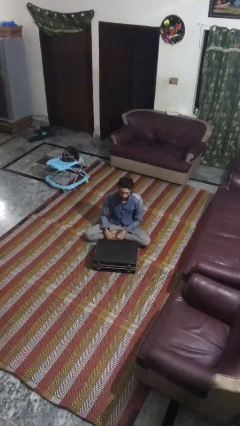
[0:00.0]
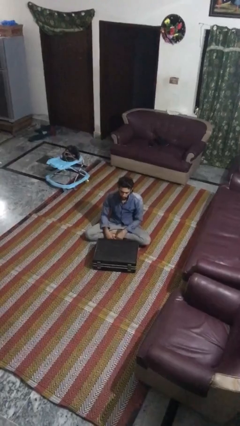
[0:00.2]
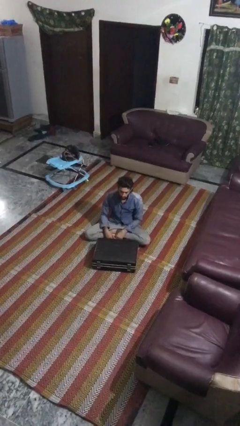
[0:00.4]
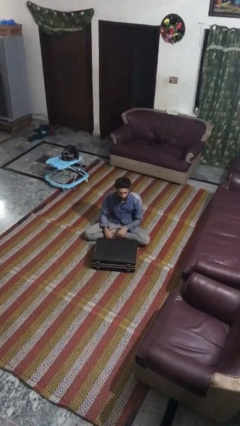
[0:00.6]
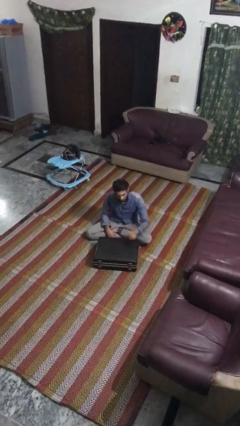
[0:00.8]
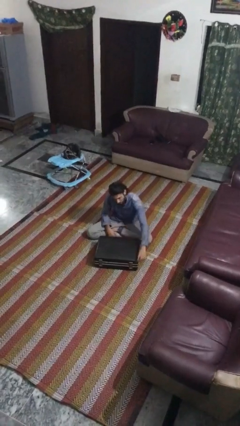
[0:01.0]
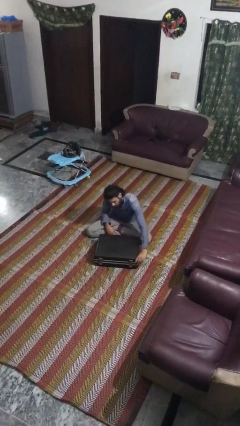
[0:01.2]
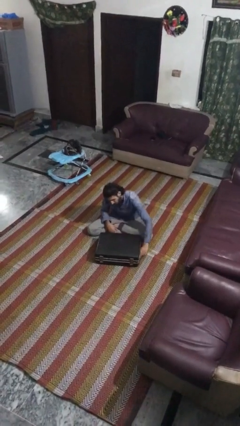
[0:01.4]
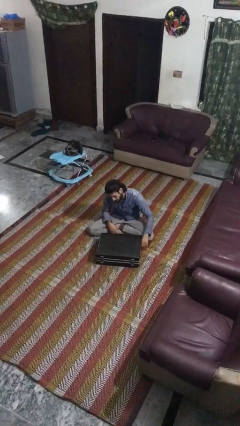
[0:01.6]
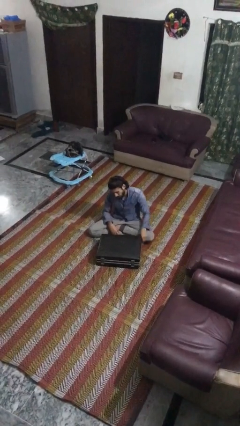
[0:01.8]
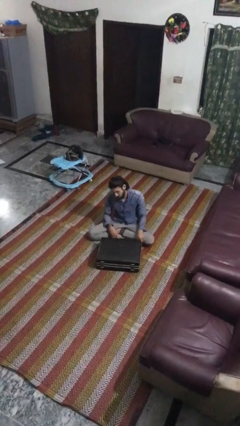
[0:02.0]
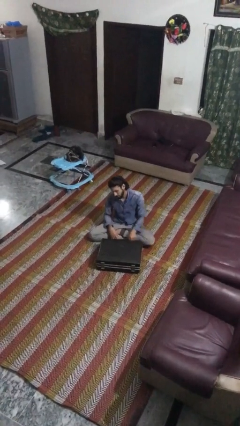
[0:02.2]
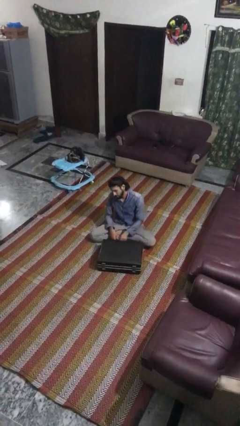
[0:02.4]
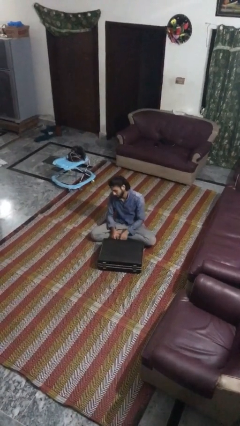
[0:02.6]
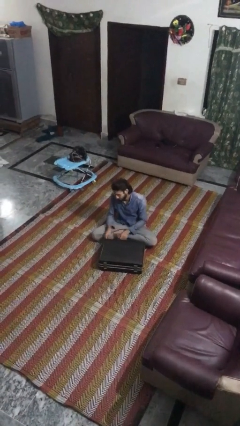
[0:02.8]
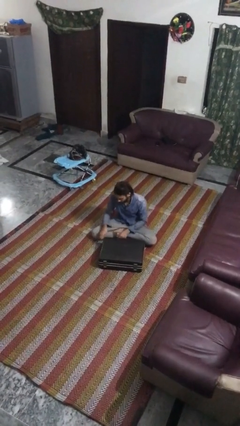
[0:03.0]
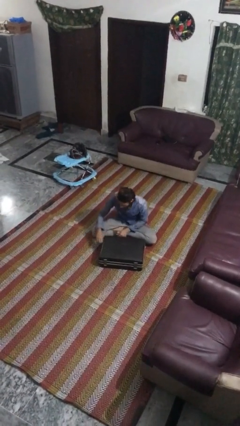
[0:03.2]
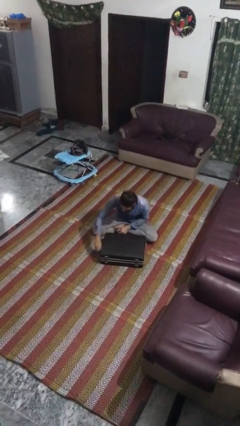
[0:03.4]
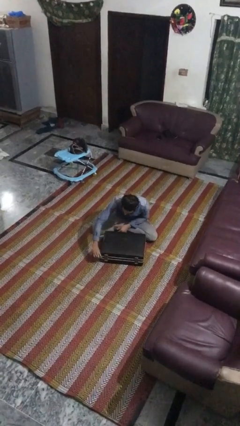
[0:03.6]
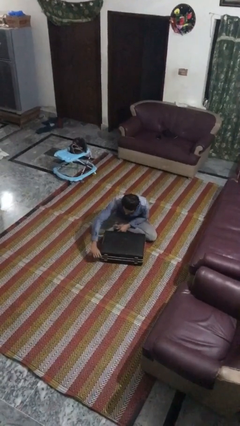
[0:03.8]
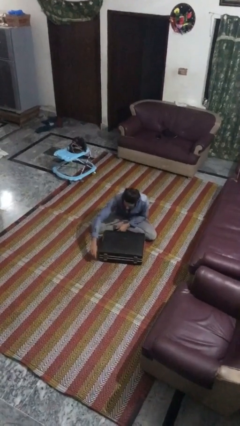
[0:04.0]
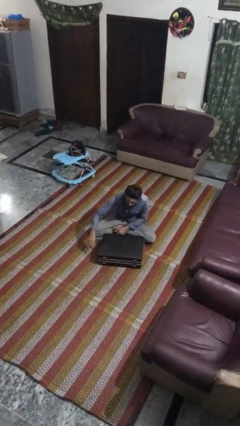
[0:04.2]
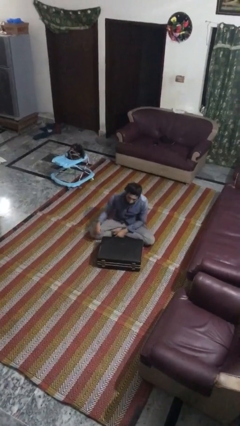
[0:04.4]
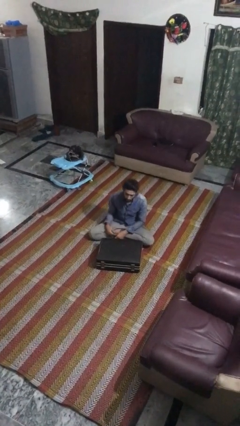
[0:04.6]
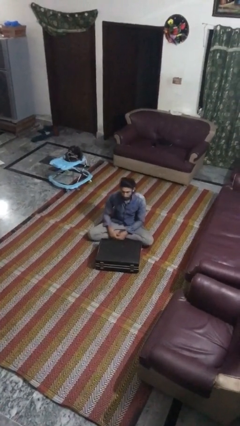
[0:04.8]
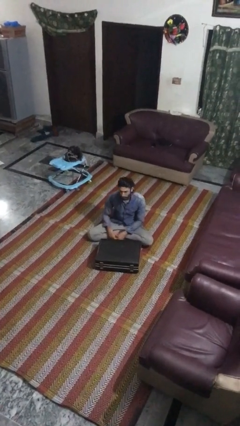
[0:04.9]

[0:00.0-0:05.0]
person closes suitcase

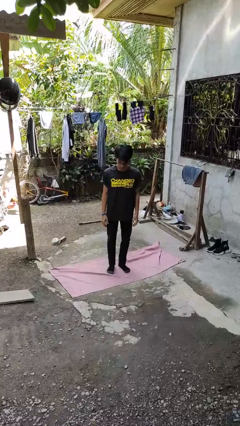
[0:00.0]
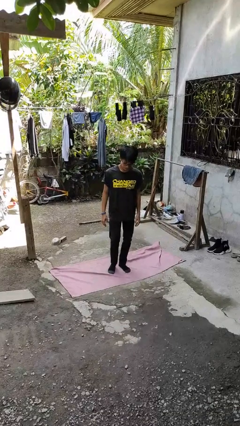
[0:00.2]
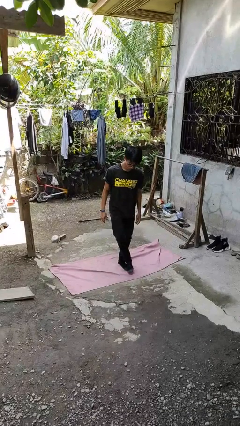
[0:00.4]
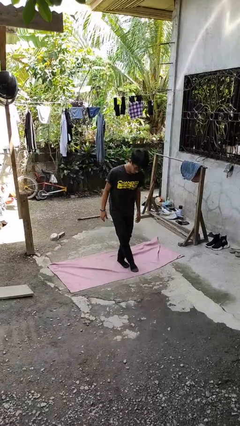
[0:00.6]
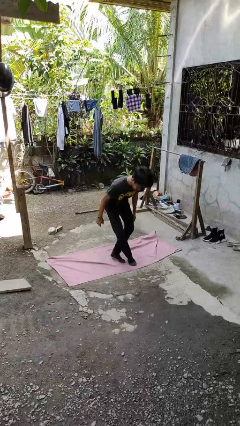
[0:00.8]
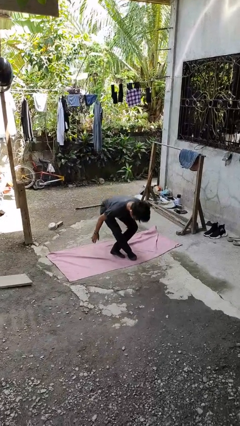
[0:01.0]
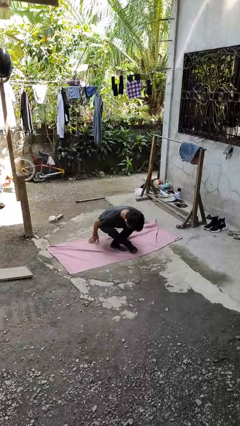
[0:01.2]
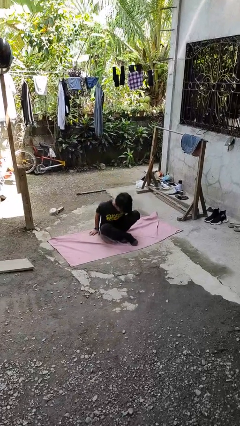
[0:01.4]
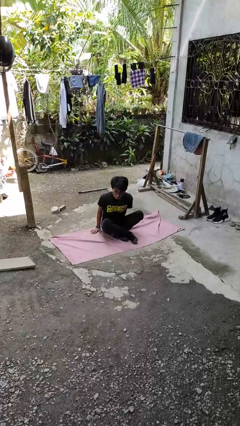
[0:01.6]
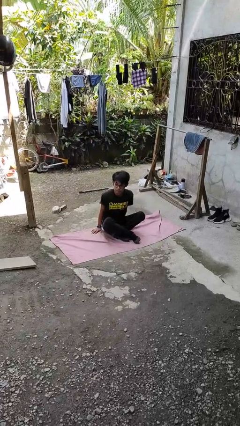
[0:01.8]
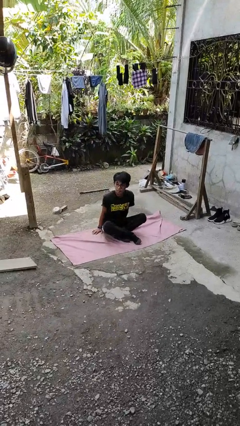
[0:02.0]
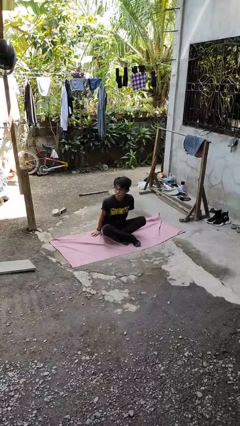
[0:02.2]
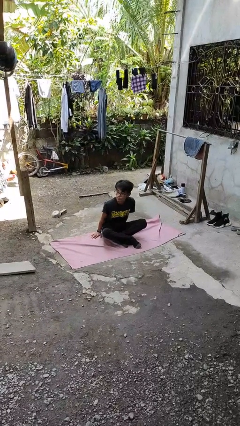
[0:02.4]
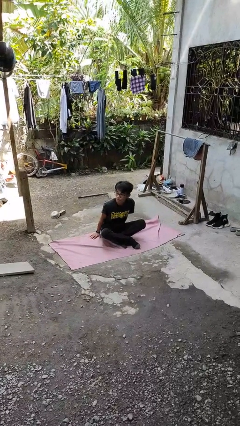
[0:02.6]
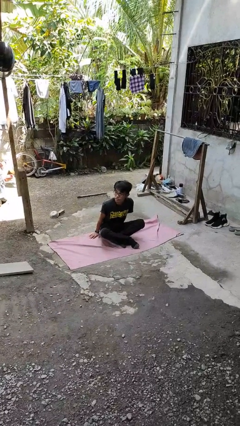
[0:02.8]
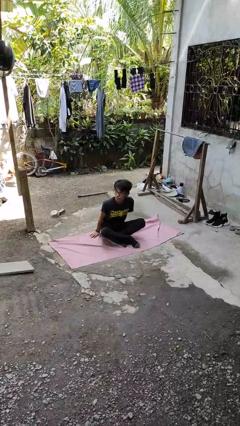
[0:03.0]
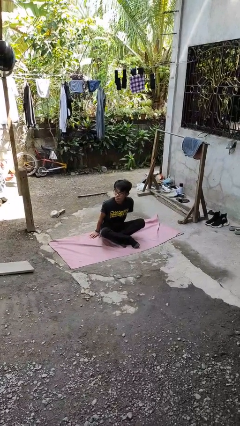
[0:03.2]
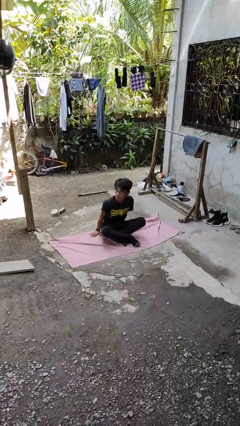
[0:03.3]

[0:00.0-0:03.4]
person sits crisscross

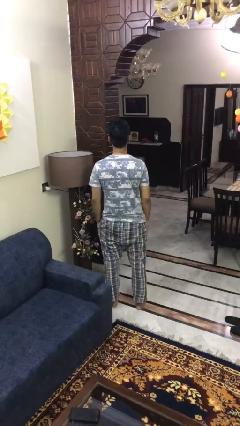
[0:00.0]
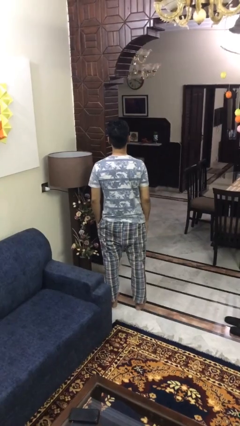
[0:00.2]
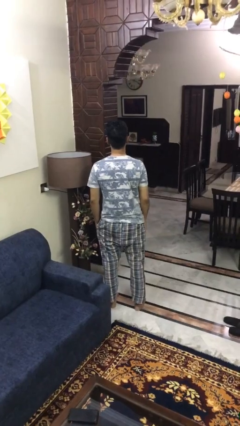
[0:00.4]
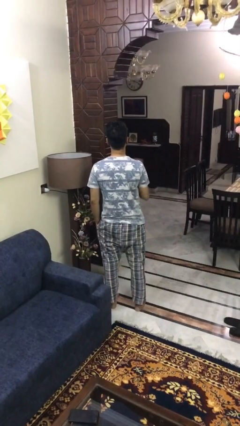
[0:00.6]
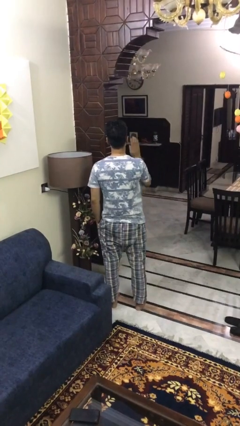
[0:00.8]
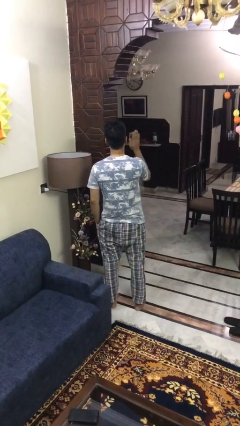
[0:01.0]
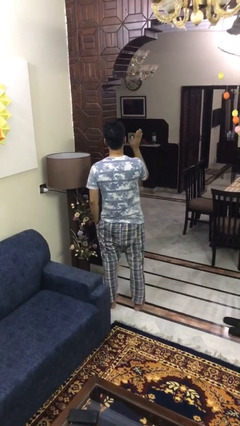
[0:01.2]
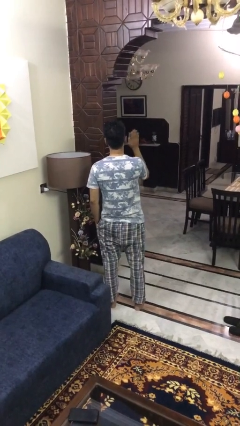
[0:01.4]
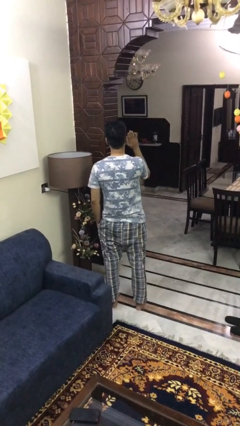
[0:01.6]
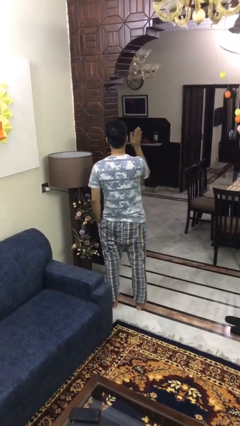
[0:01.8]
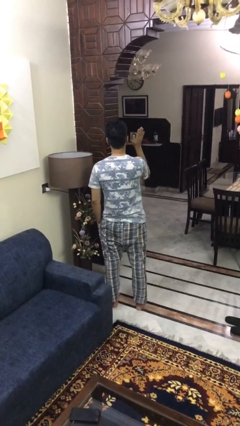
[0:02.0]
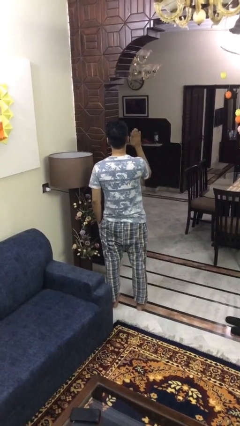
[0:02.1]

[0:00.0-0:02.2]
person waves at person

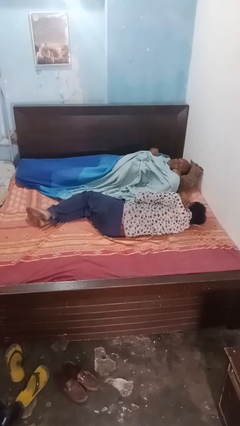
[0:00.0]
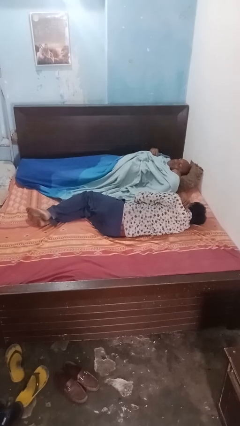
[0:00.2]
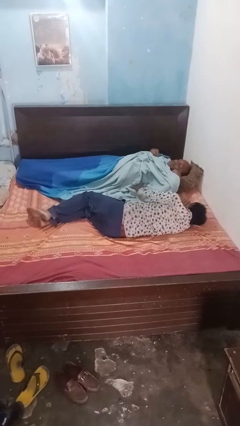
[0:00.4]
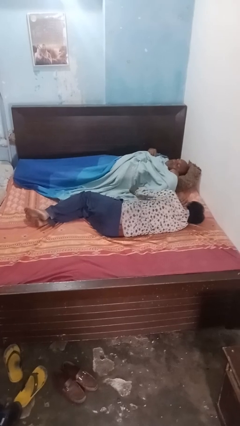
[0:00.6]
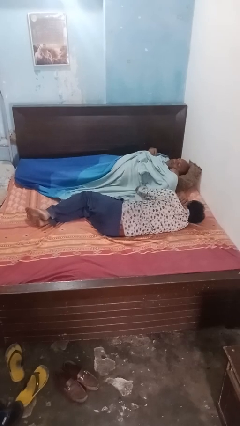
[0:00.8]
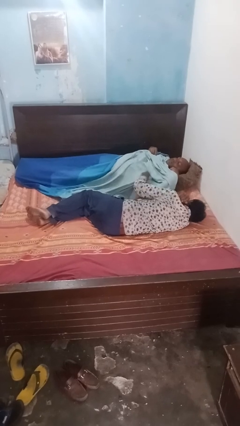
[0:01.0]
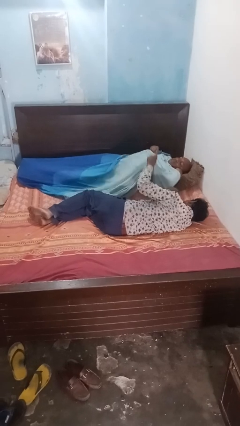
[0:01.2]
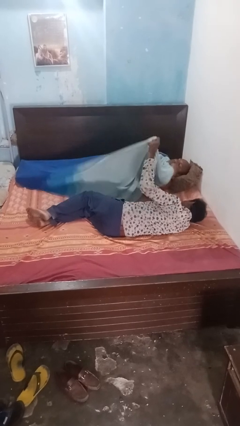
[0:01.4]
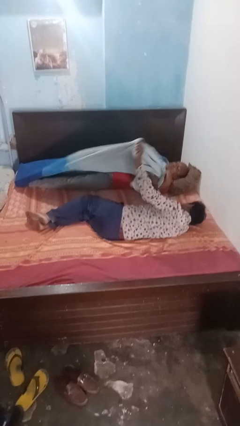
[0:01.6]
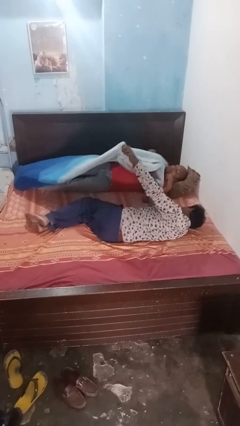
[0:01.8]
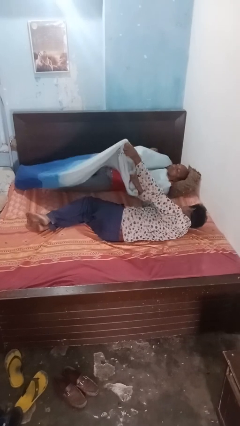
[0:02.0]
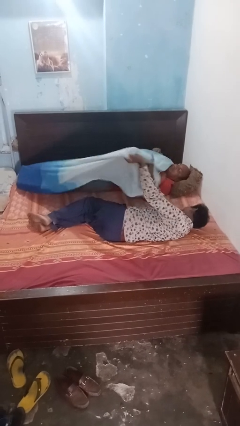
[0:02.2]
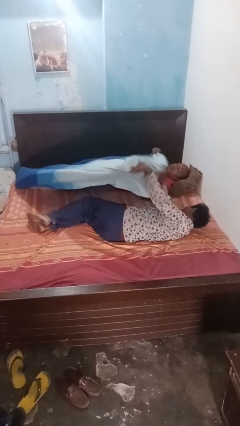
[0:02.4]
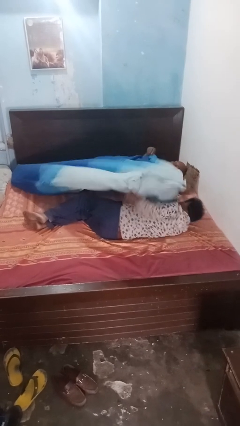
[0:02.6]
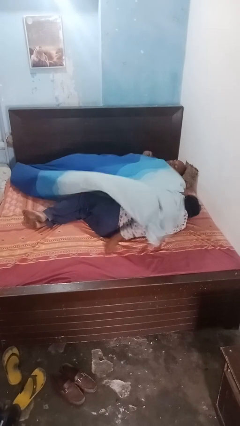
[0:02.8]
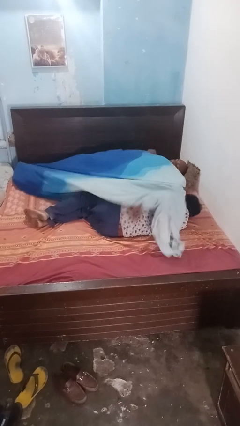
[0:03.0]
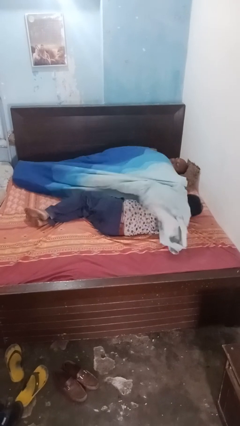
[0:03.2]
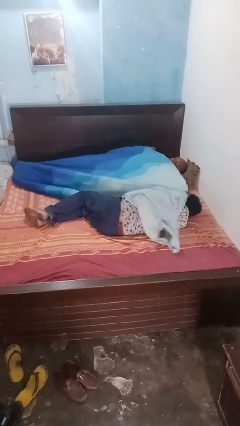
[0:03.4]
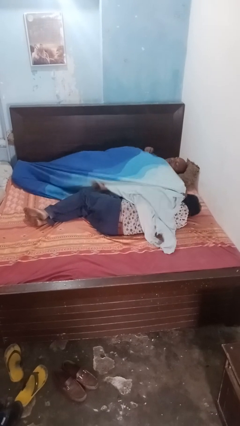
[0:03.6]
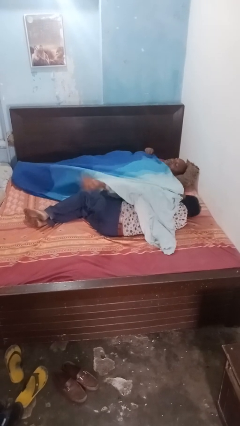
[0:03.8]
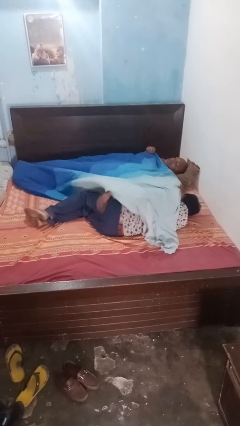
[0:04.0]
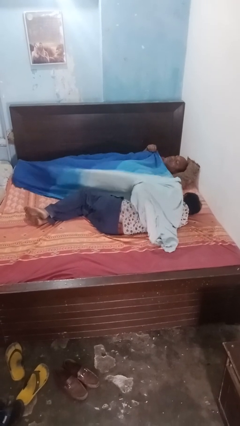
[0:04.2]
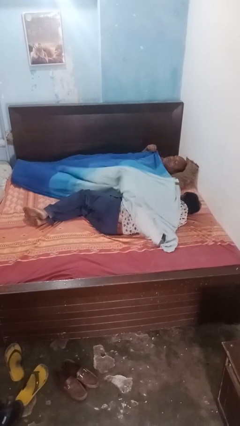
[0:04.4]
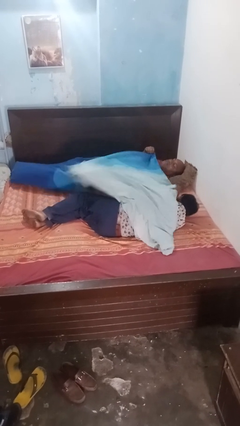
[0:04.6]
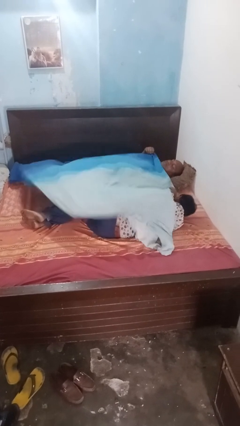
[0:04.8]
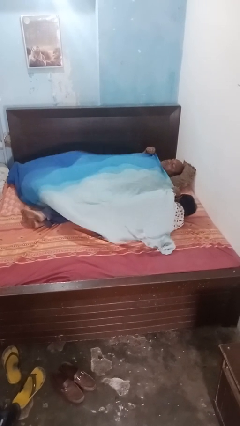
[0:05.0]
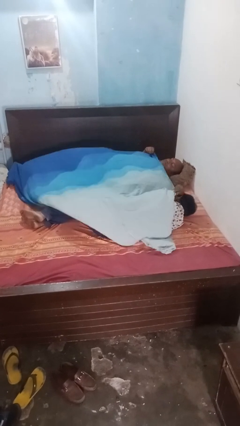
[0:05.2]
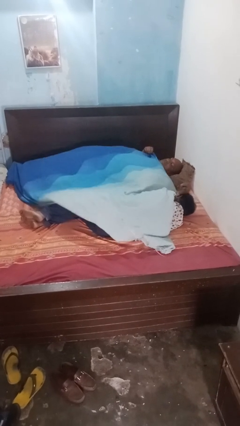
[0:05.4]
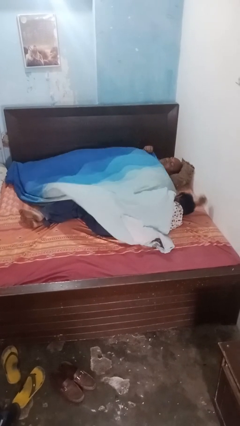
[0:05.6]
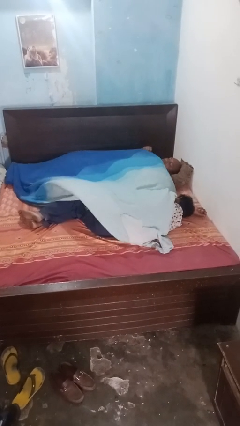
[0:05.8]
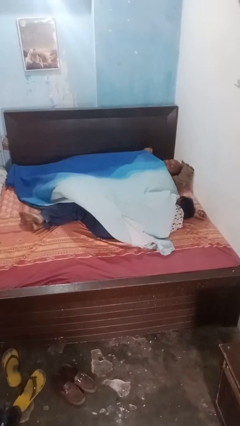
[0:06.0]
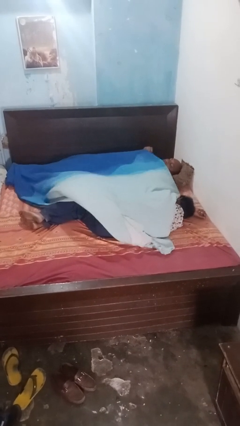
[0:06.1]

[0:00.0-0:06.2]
person covers friend with blanket

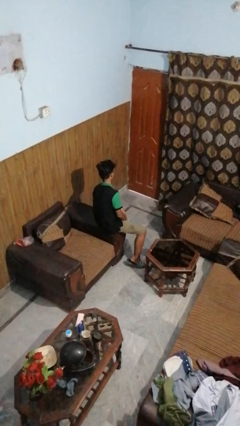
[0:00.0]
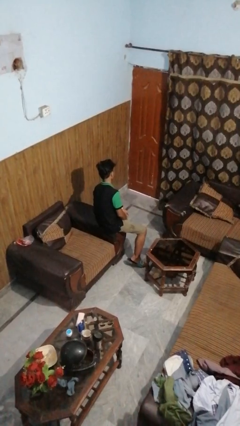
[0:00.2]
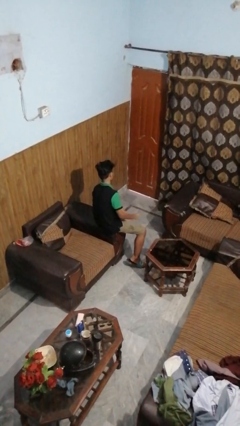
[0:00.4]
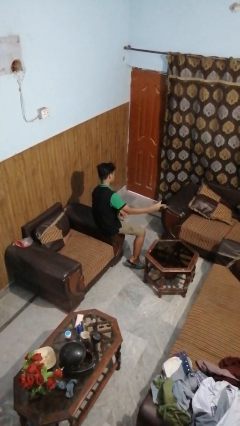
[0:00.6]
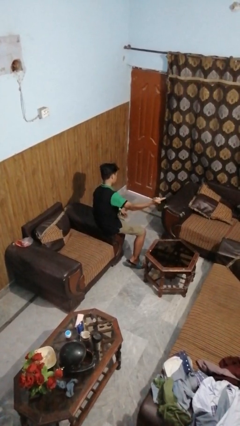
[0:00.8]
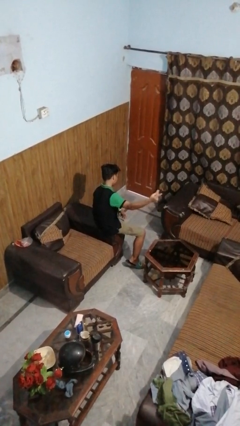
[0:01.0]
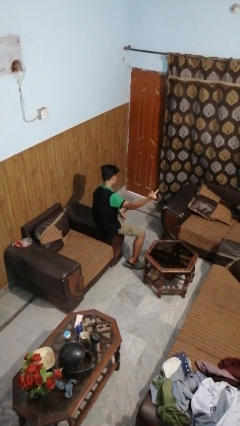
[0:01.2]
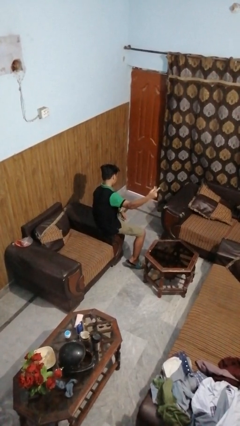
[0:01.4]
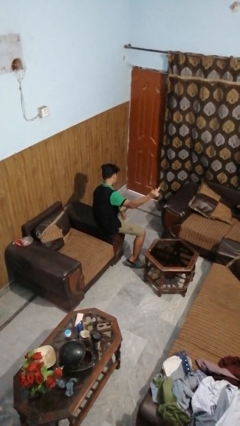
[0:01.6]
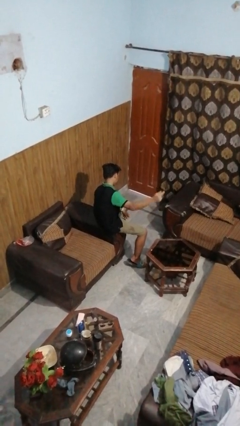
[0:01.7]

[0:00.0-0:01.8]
person snaps fingers
